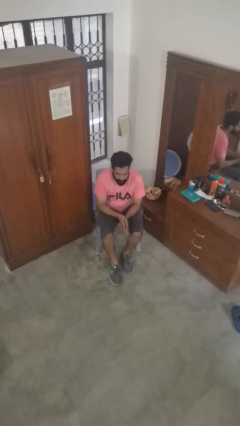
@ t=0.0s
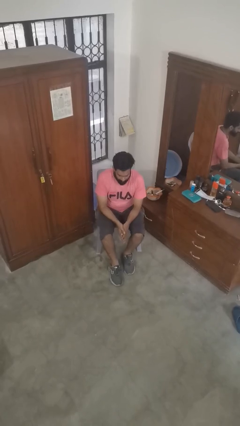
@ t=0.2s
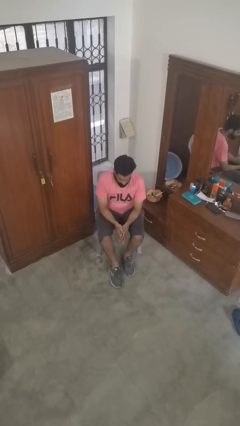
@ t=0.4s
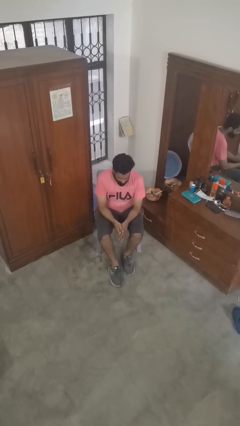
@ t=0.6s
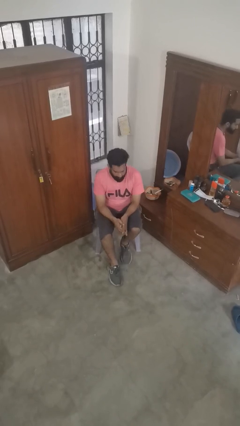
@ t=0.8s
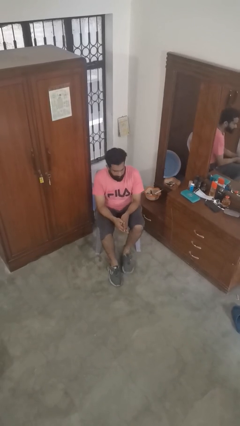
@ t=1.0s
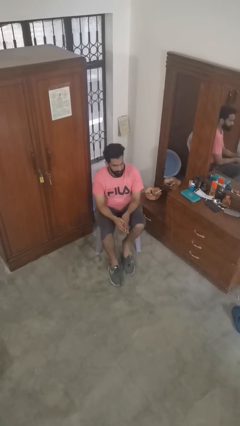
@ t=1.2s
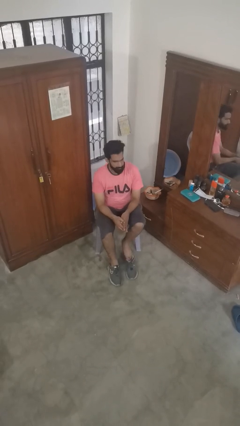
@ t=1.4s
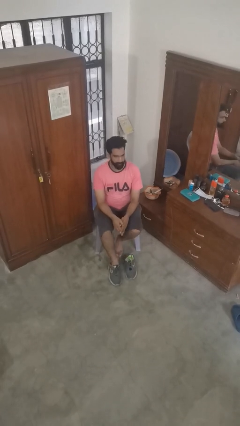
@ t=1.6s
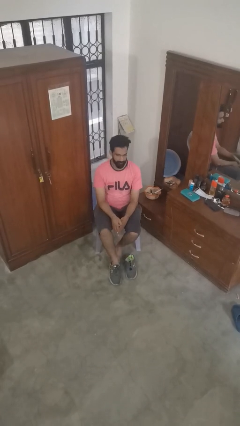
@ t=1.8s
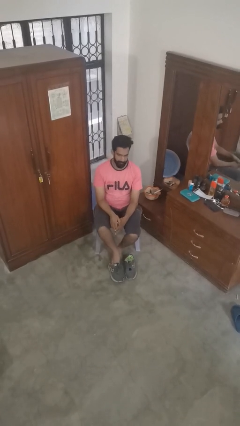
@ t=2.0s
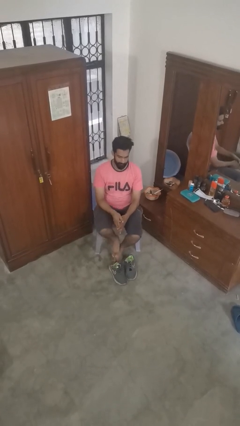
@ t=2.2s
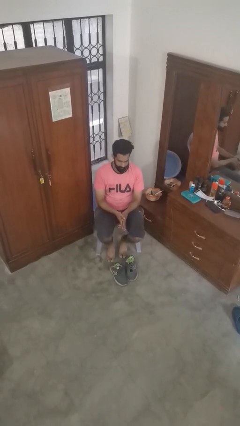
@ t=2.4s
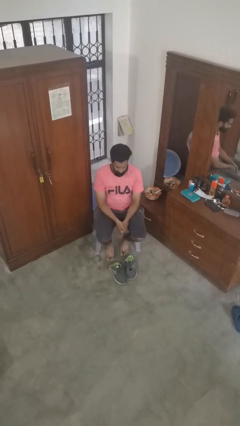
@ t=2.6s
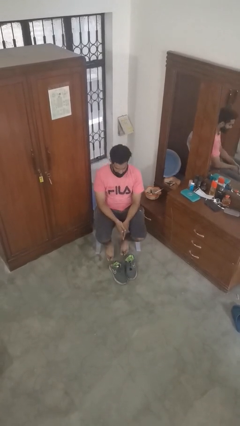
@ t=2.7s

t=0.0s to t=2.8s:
person takes off shoes

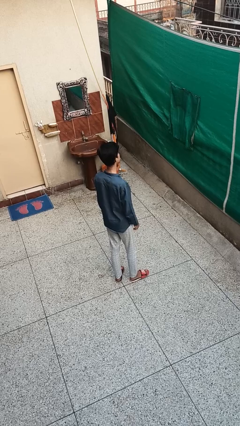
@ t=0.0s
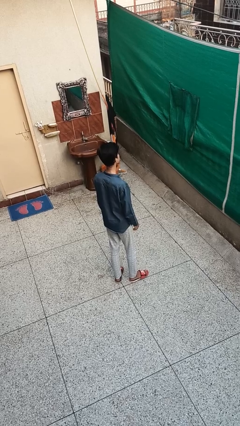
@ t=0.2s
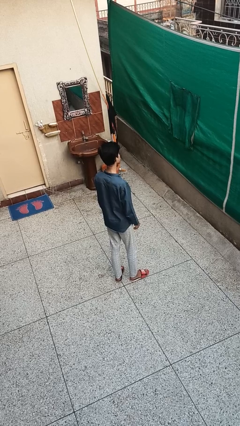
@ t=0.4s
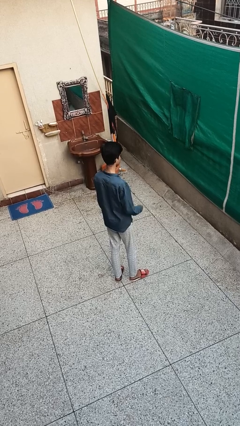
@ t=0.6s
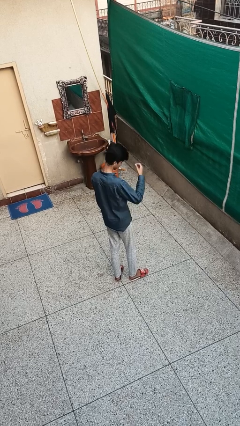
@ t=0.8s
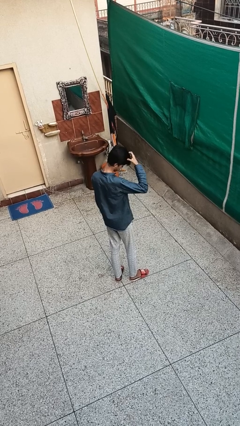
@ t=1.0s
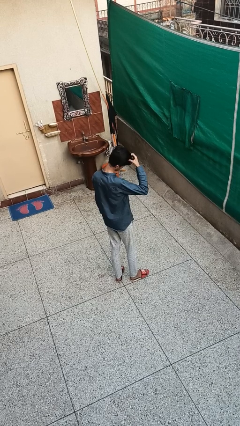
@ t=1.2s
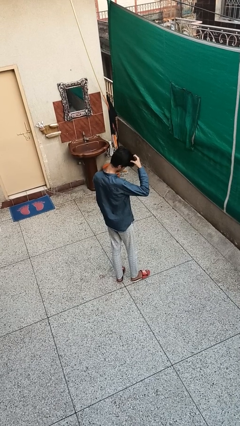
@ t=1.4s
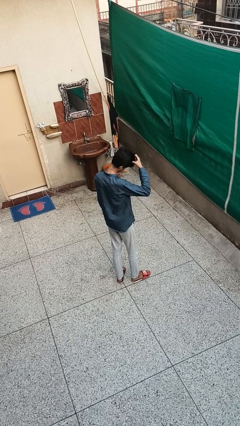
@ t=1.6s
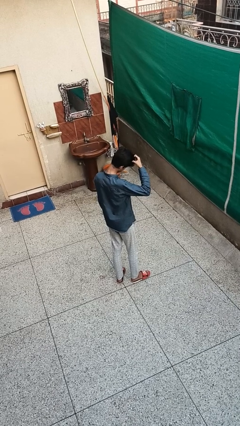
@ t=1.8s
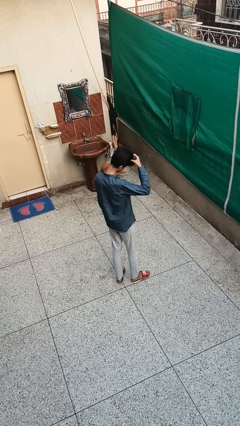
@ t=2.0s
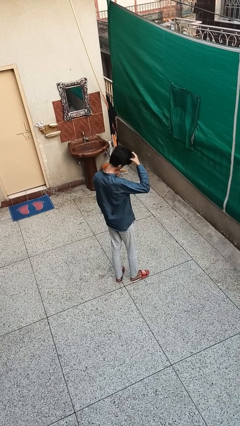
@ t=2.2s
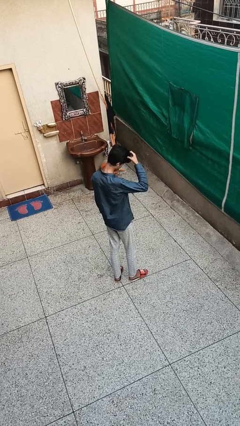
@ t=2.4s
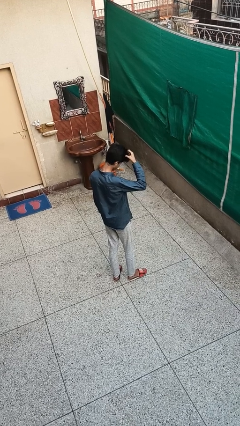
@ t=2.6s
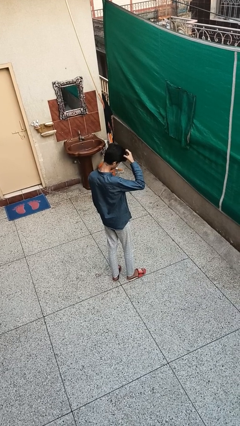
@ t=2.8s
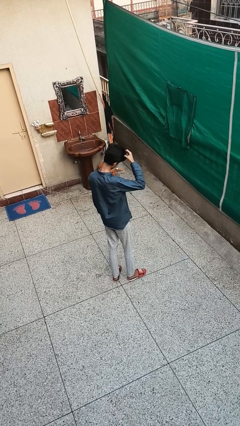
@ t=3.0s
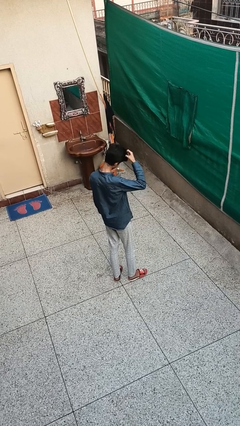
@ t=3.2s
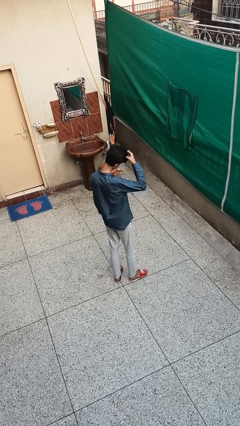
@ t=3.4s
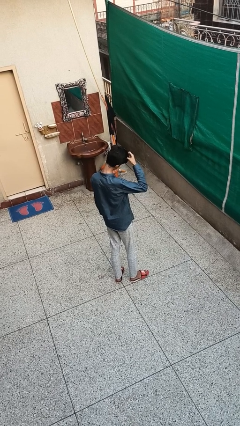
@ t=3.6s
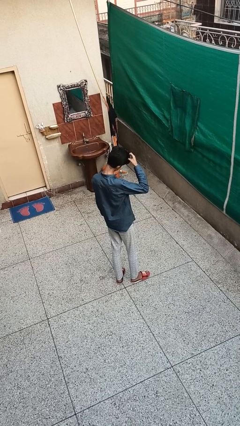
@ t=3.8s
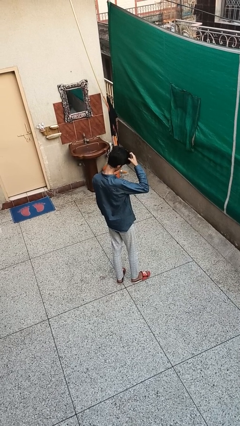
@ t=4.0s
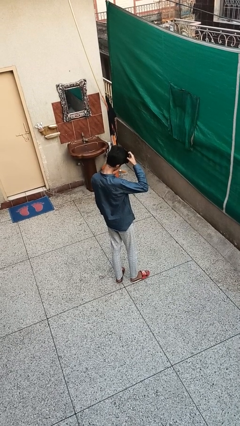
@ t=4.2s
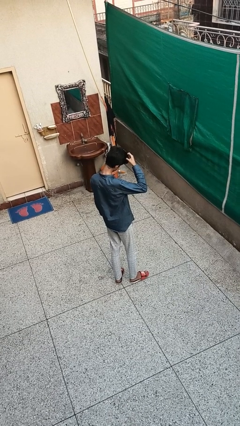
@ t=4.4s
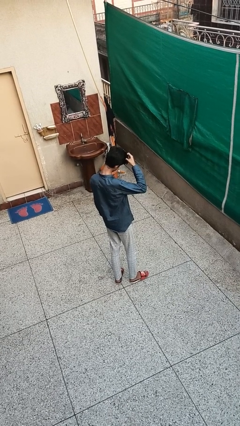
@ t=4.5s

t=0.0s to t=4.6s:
person scratches face

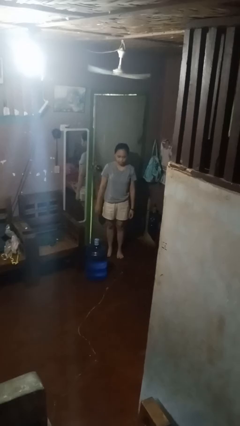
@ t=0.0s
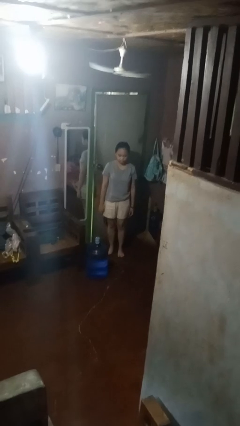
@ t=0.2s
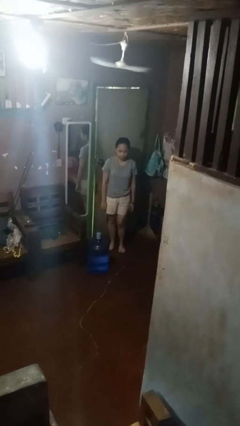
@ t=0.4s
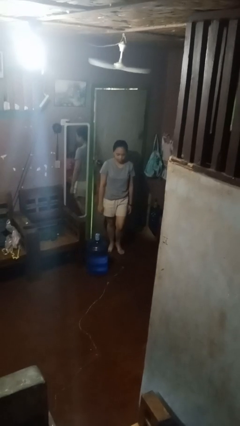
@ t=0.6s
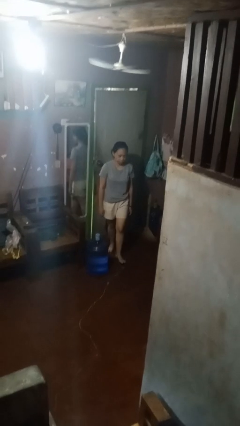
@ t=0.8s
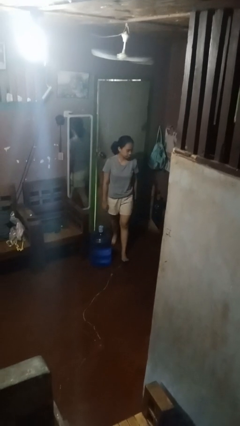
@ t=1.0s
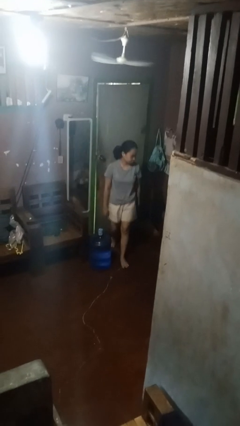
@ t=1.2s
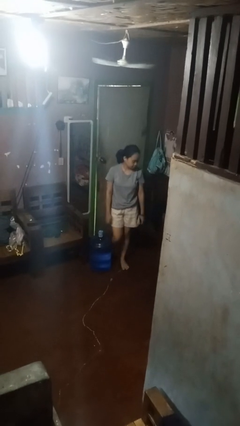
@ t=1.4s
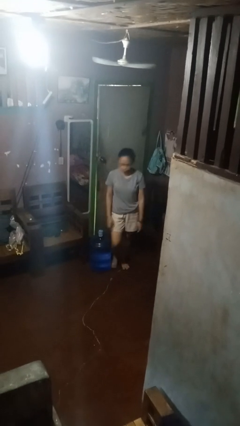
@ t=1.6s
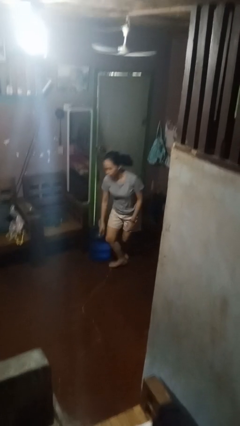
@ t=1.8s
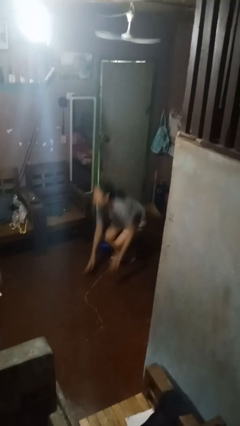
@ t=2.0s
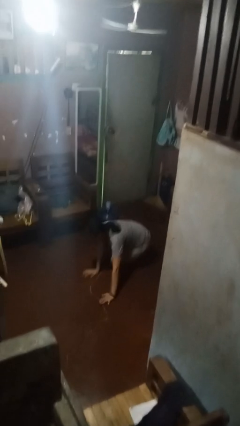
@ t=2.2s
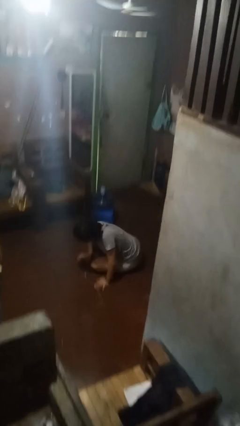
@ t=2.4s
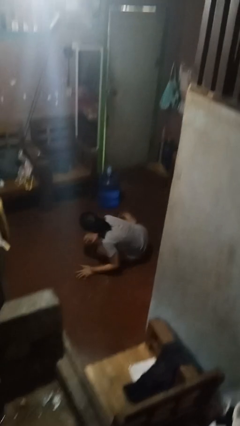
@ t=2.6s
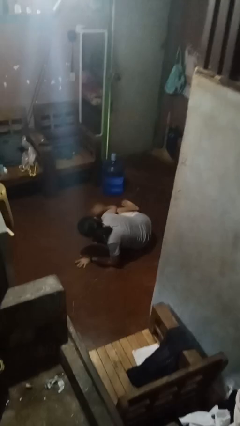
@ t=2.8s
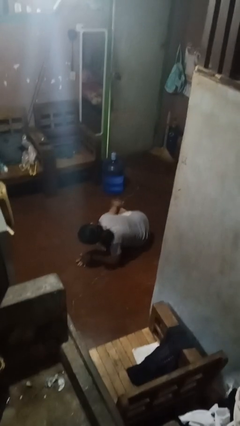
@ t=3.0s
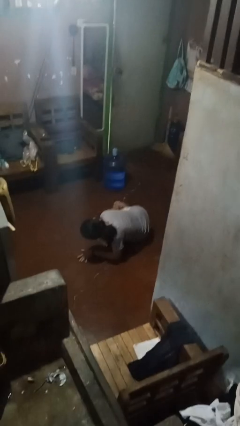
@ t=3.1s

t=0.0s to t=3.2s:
person trips on object on floor

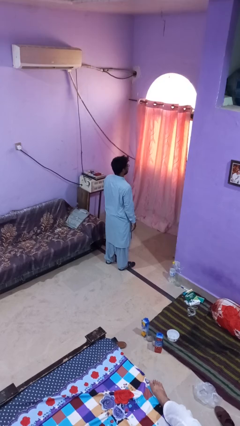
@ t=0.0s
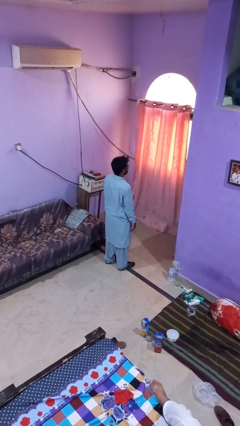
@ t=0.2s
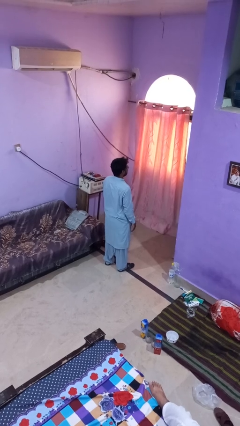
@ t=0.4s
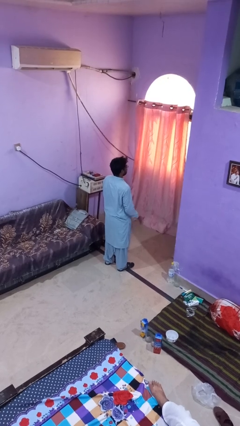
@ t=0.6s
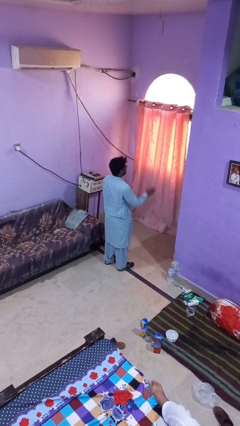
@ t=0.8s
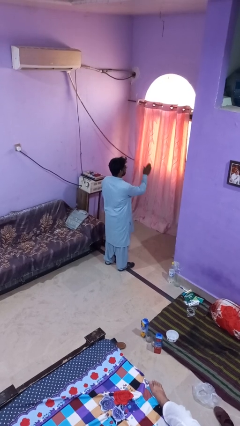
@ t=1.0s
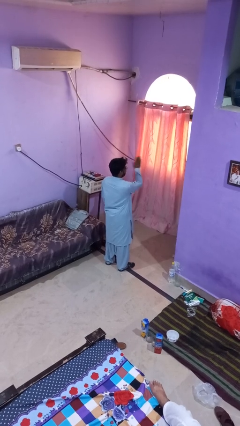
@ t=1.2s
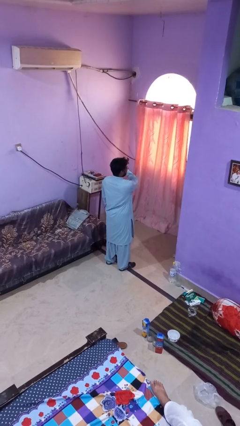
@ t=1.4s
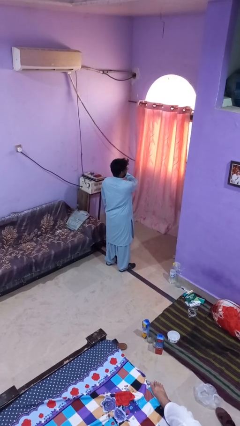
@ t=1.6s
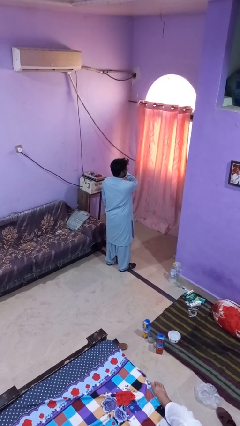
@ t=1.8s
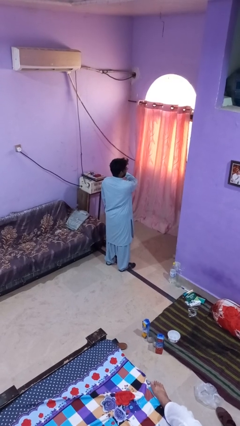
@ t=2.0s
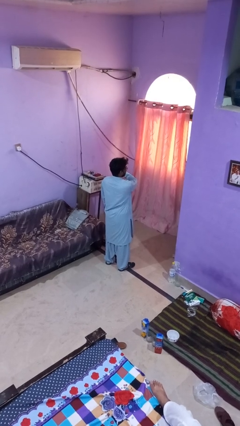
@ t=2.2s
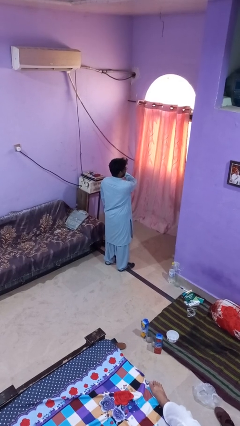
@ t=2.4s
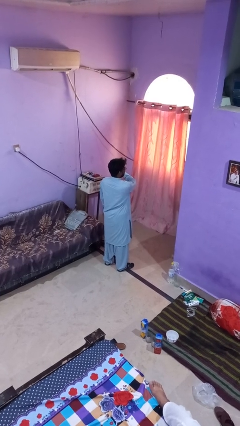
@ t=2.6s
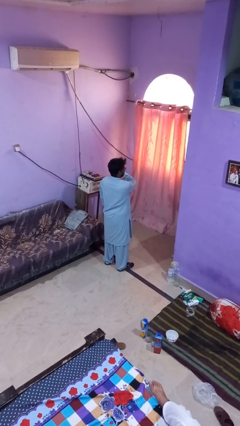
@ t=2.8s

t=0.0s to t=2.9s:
person gestures swipe left

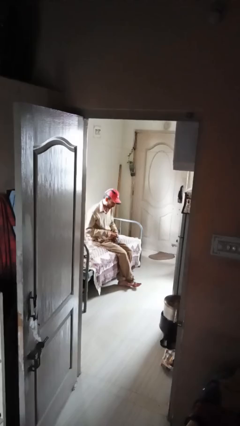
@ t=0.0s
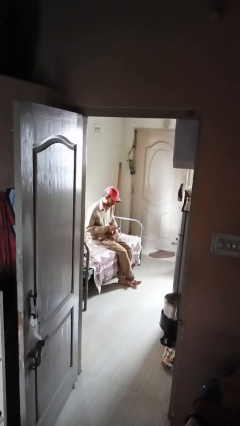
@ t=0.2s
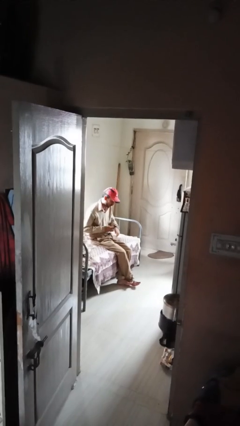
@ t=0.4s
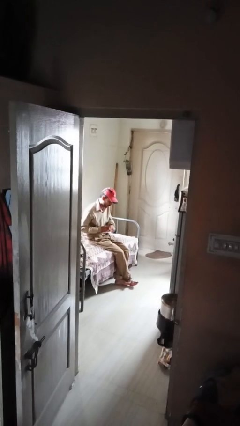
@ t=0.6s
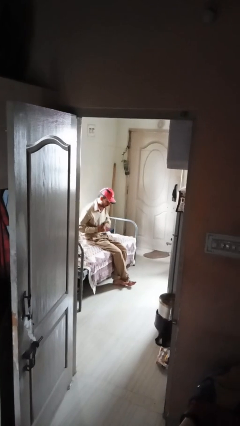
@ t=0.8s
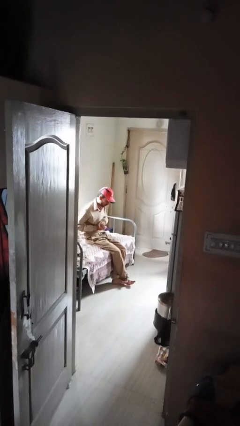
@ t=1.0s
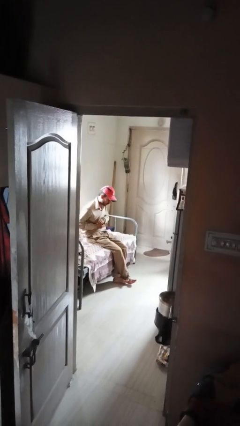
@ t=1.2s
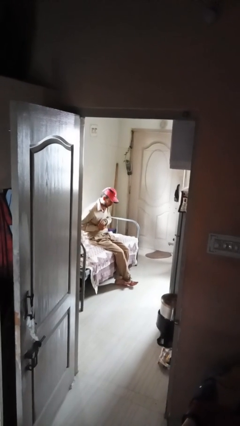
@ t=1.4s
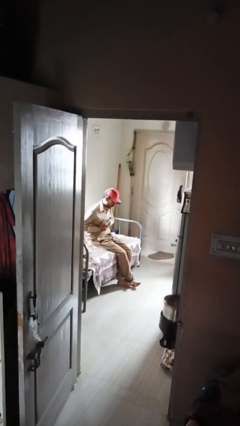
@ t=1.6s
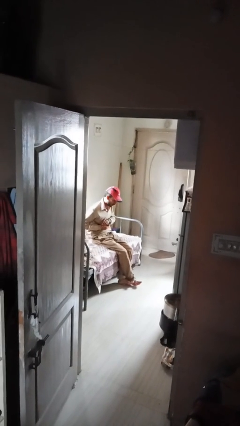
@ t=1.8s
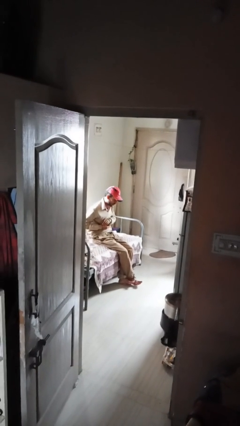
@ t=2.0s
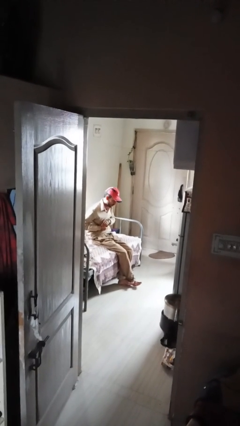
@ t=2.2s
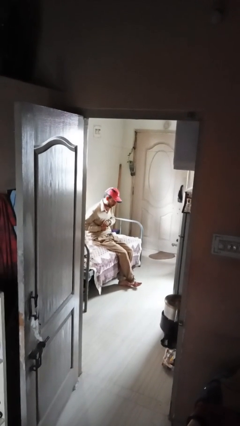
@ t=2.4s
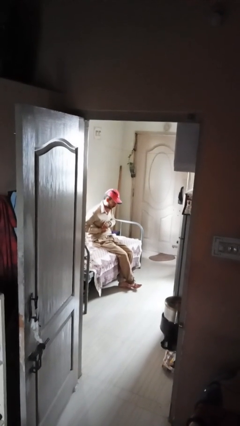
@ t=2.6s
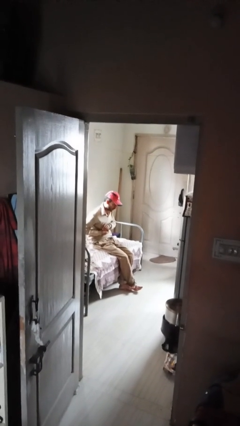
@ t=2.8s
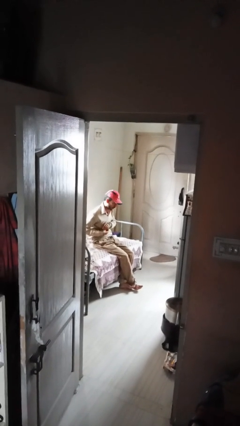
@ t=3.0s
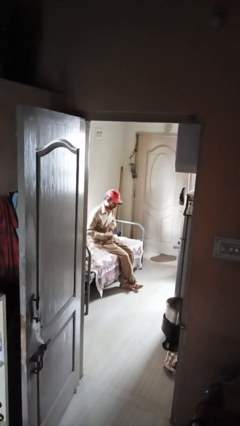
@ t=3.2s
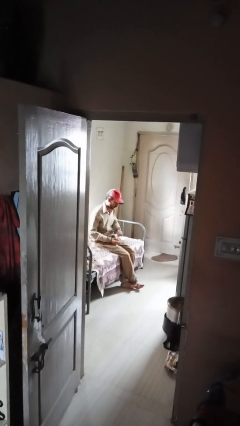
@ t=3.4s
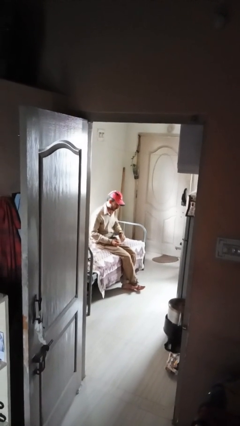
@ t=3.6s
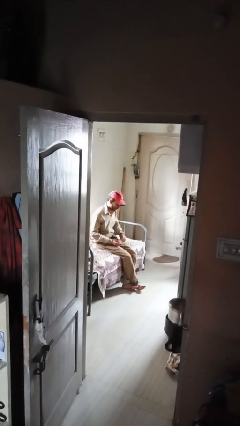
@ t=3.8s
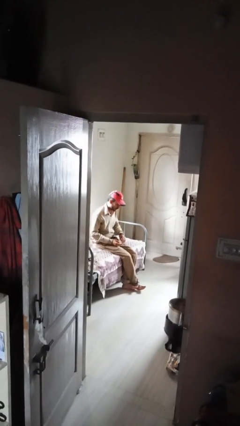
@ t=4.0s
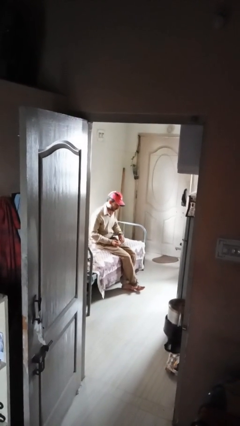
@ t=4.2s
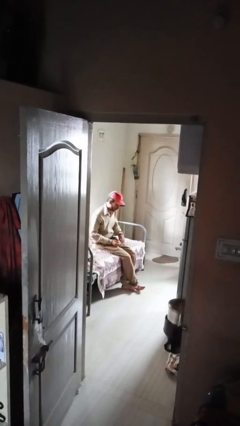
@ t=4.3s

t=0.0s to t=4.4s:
person puts on wristwatch
